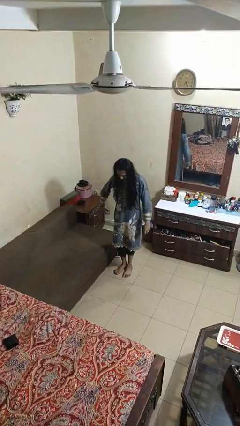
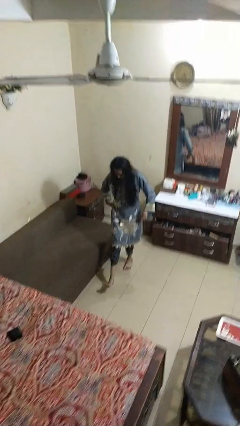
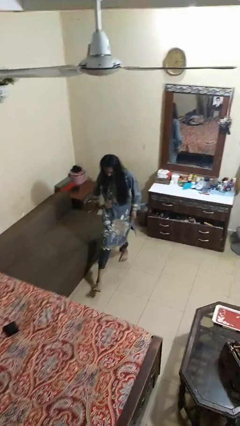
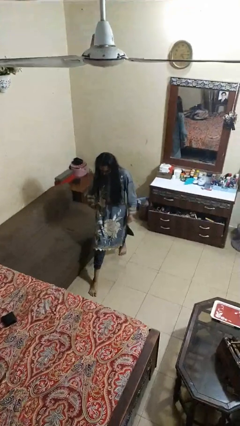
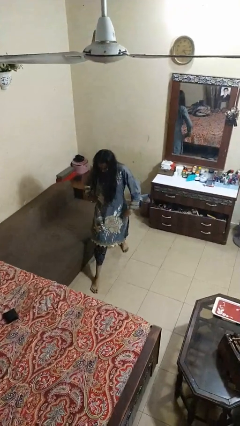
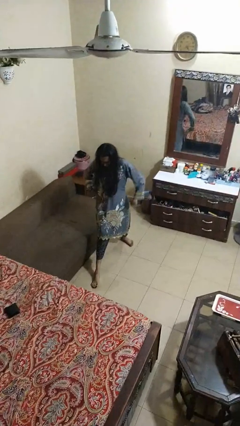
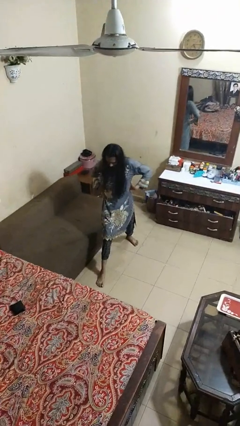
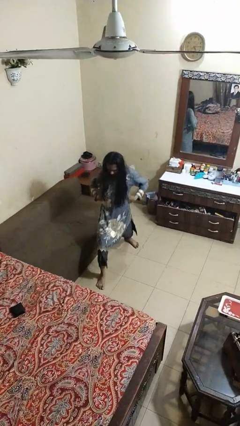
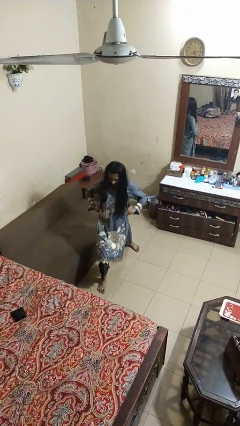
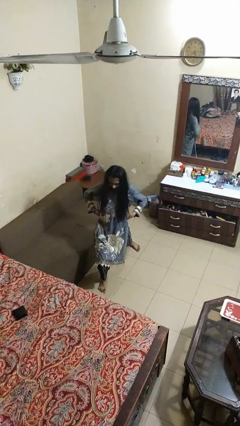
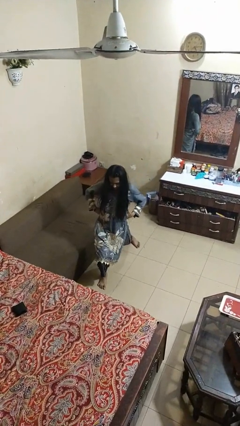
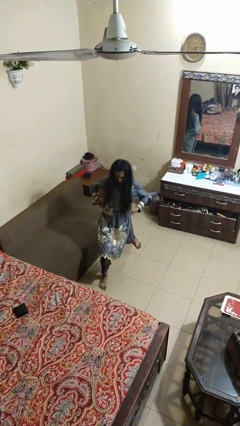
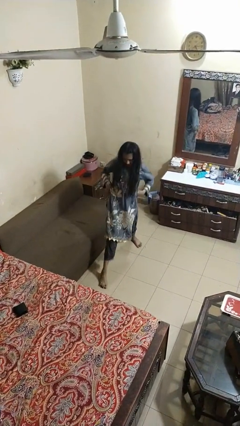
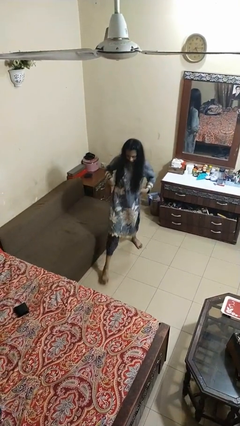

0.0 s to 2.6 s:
person exercises with lunges

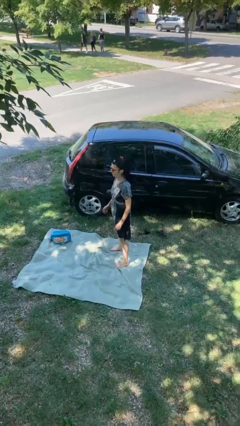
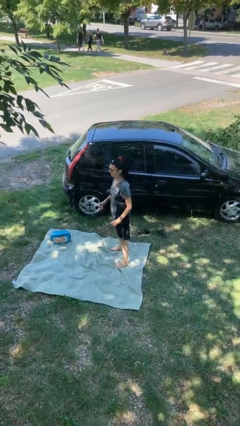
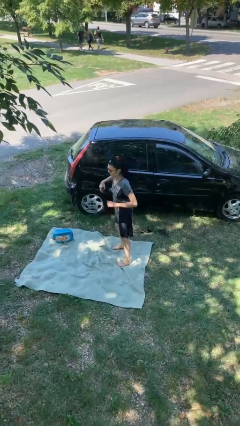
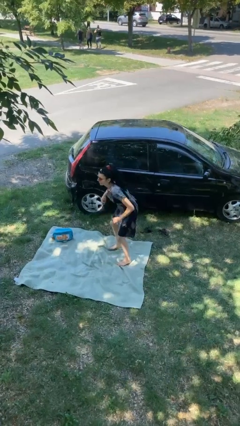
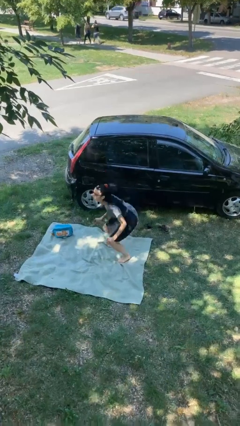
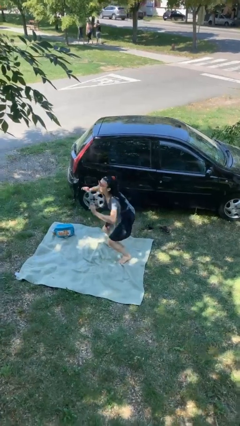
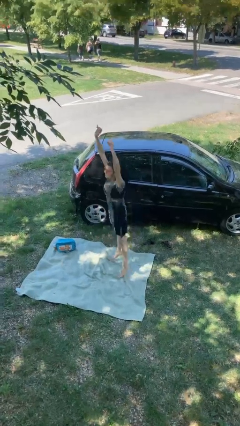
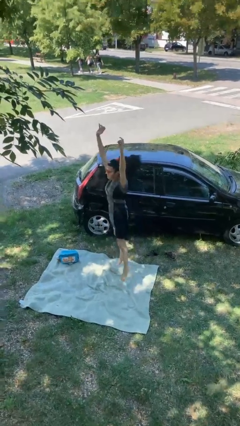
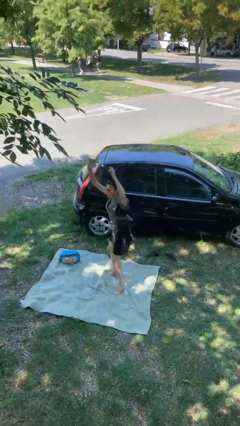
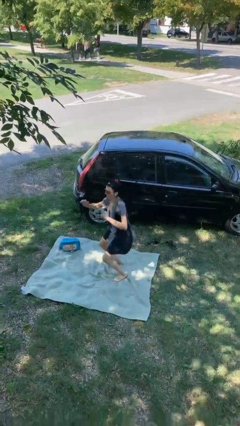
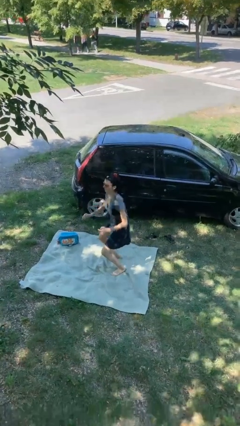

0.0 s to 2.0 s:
person jumps

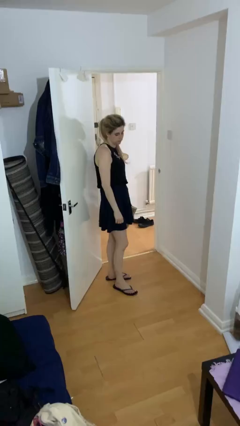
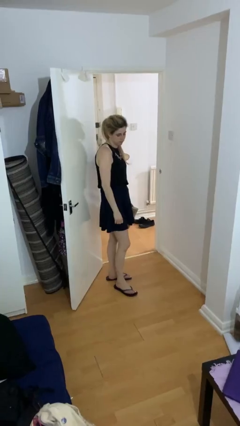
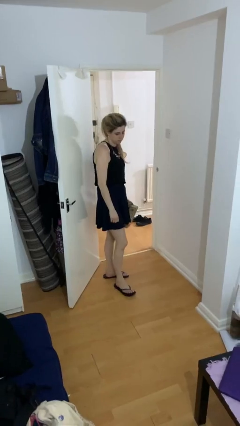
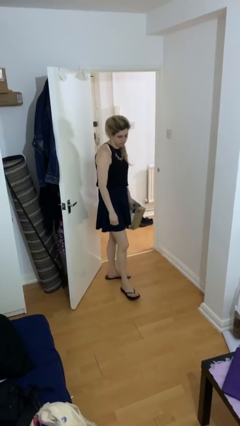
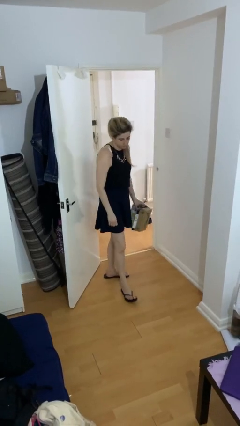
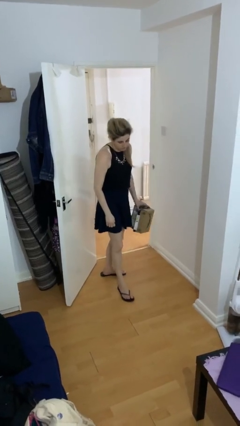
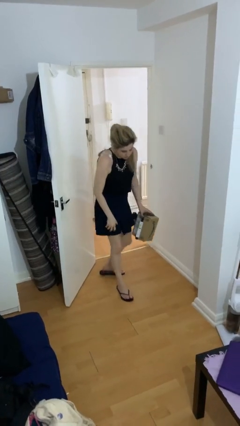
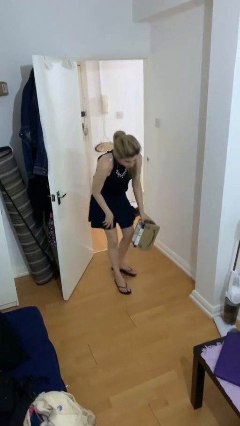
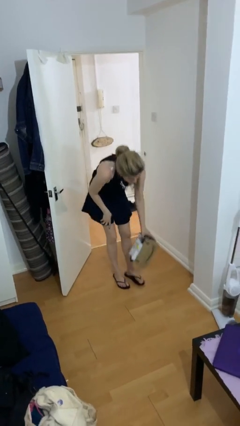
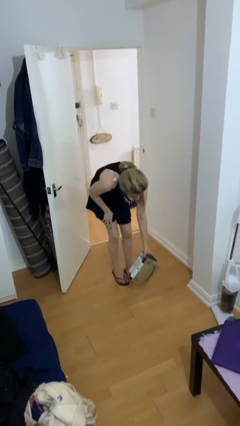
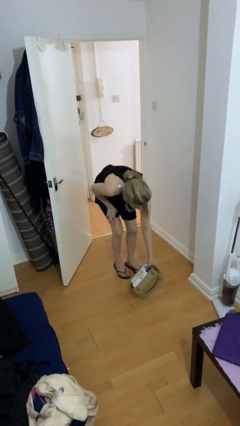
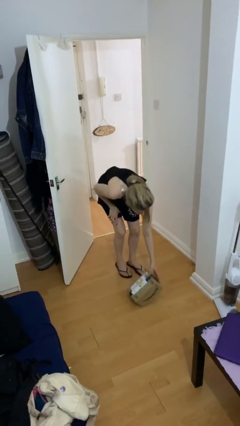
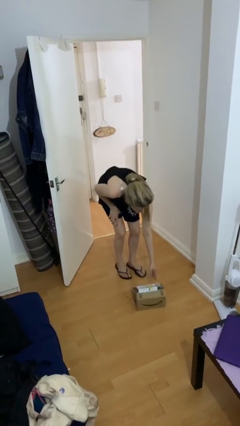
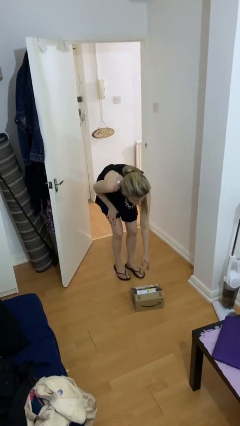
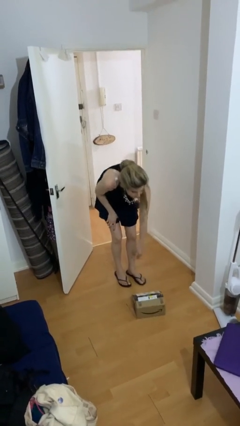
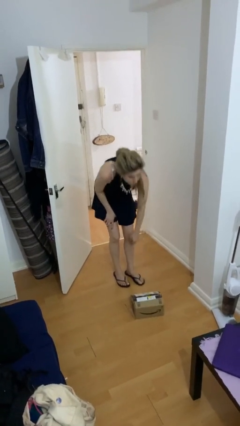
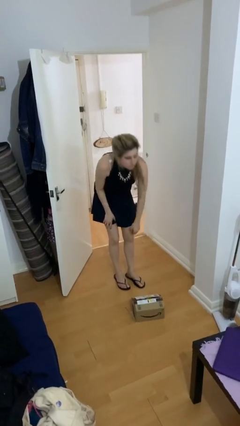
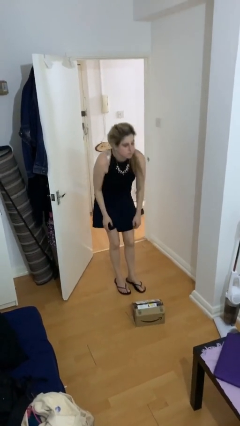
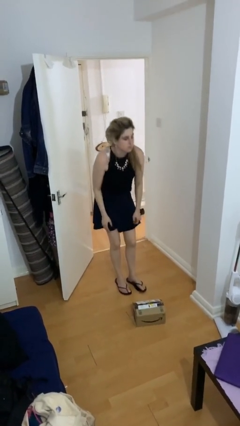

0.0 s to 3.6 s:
person puts down object on floor

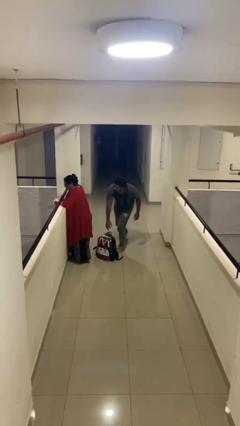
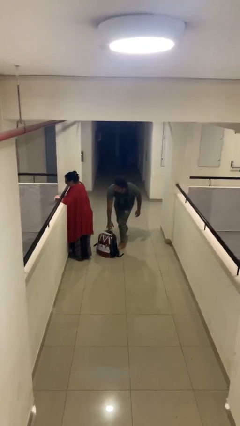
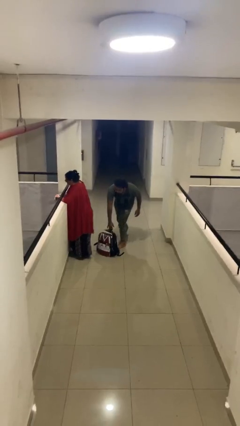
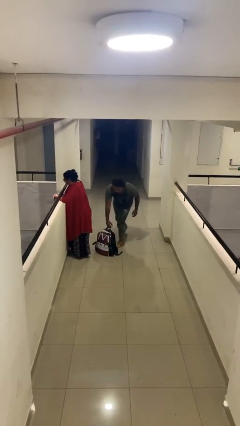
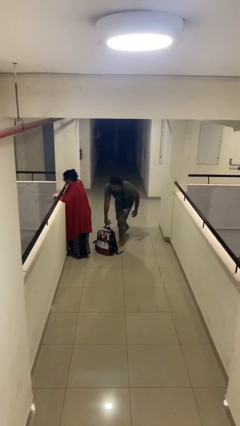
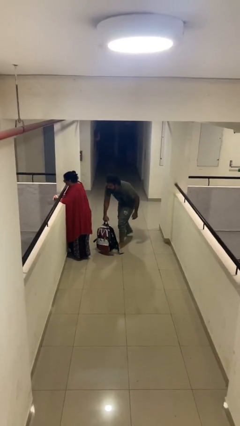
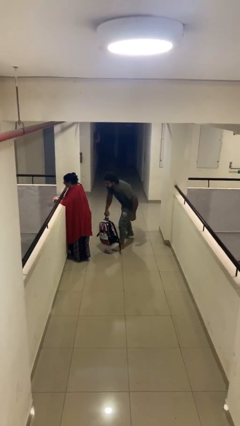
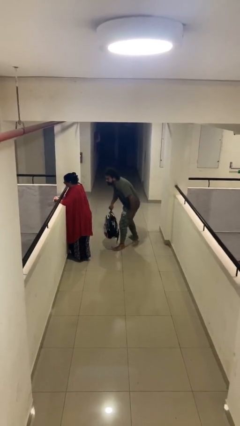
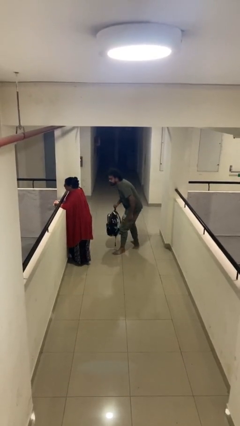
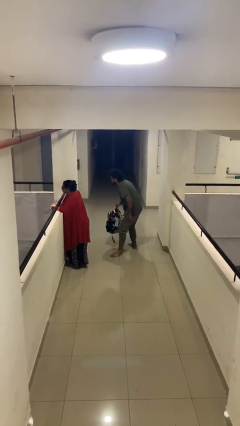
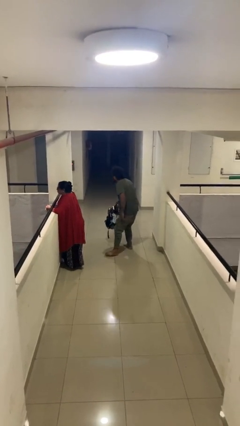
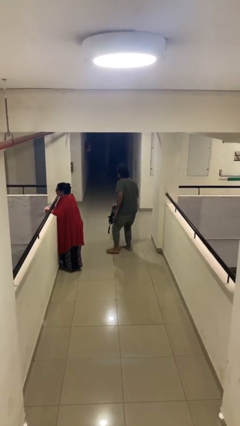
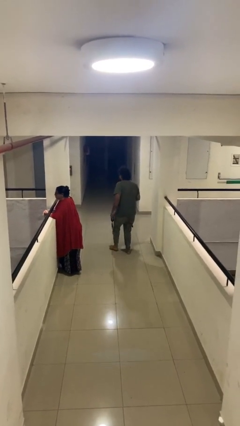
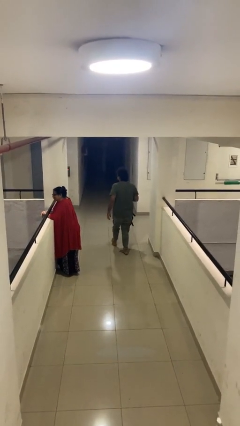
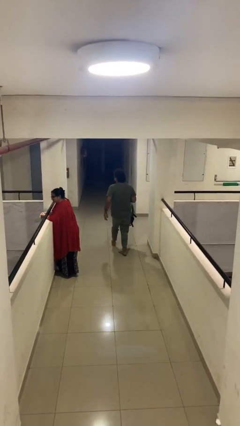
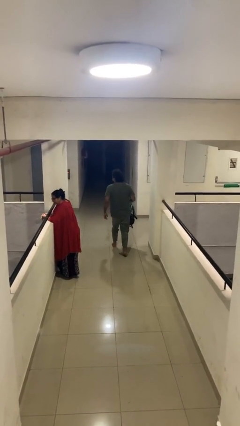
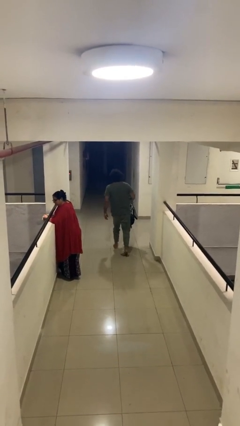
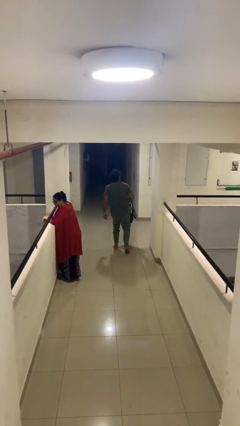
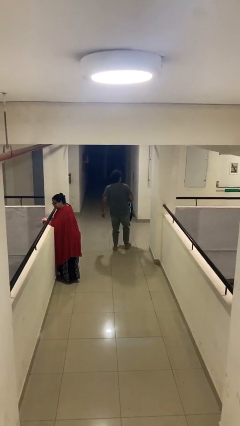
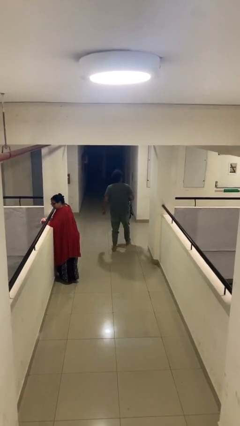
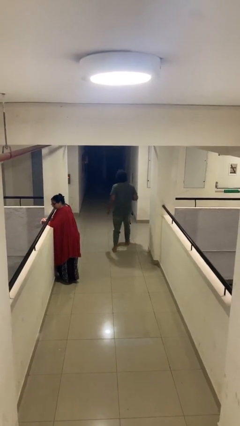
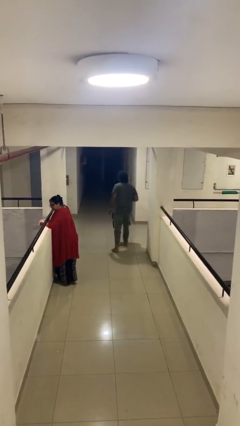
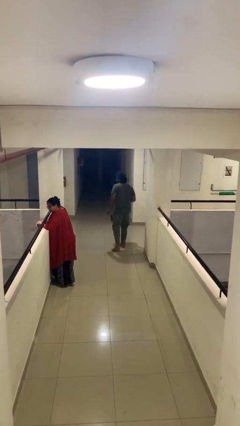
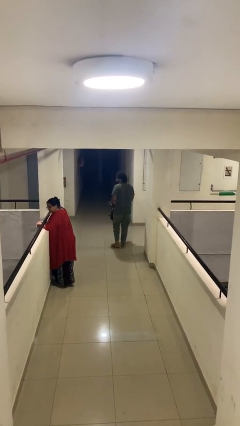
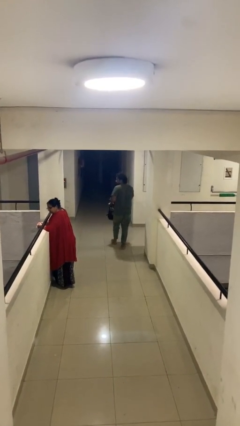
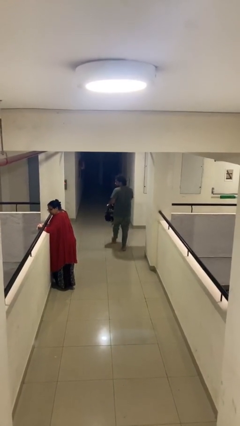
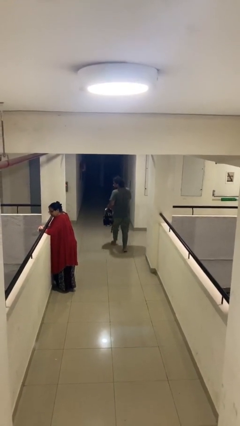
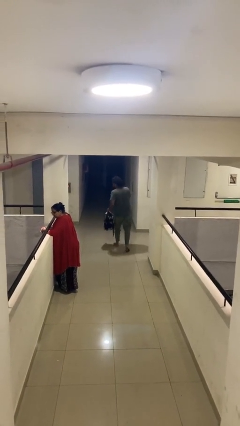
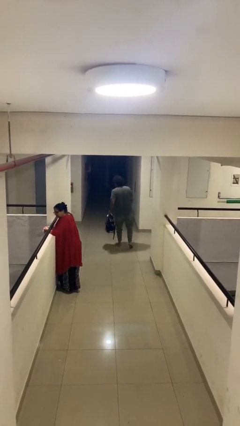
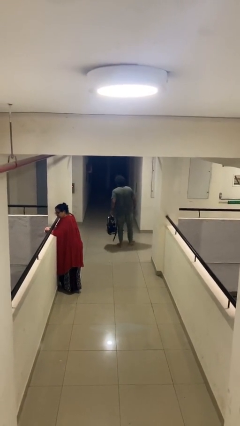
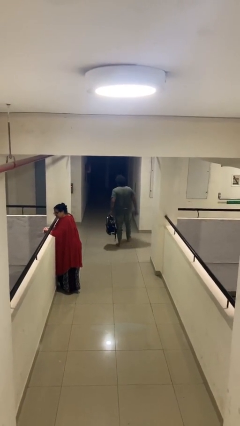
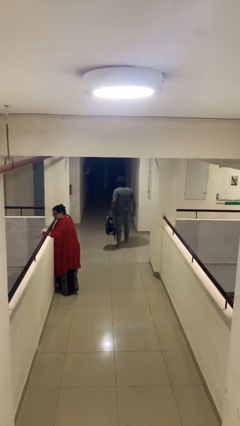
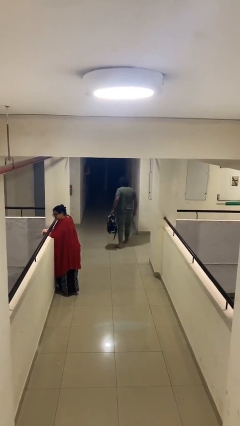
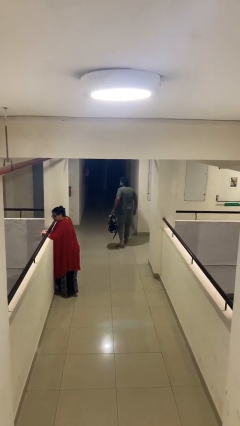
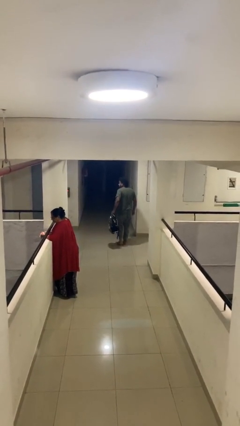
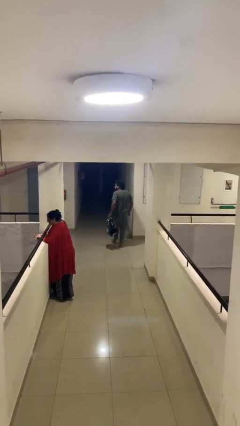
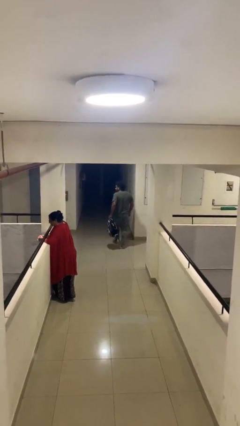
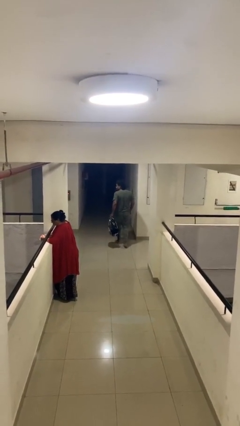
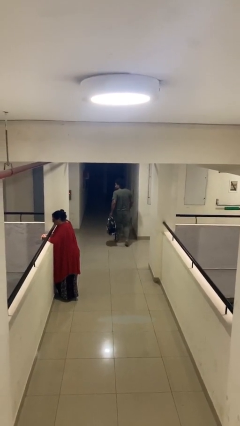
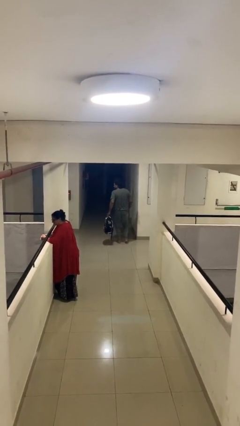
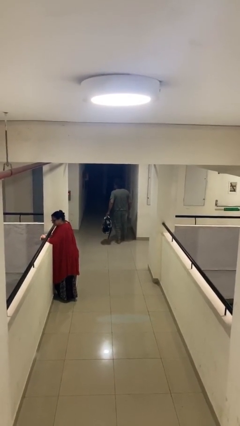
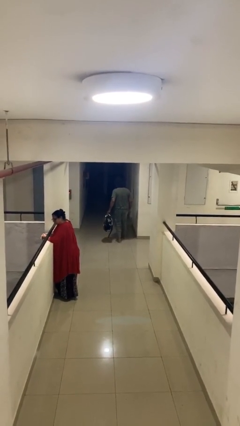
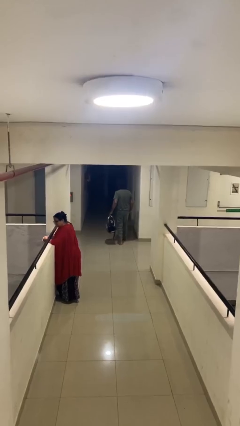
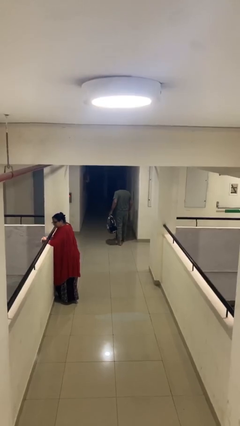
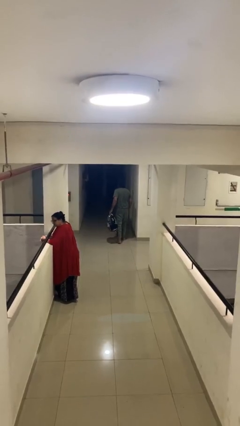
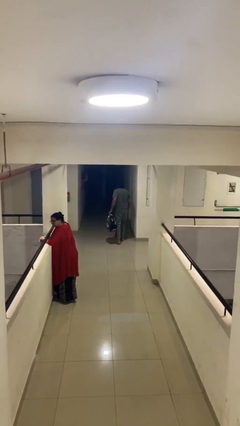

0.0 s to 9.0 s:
person steals object from person

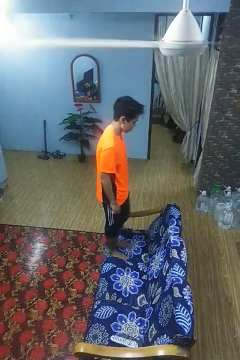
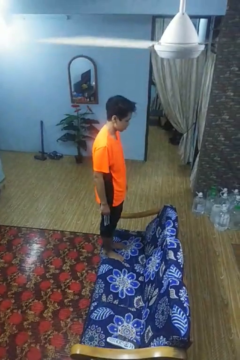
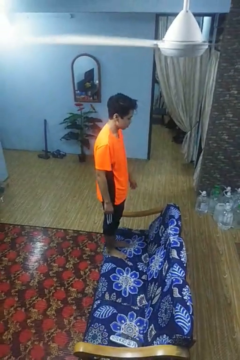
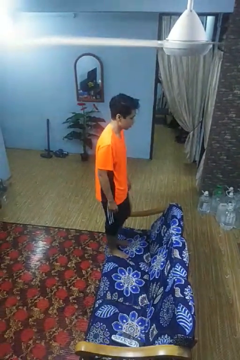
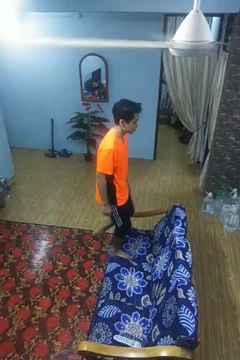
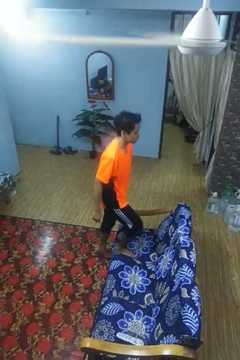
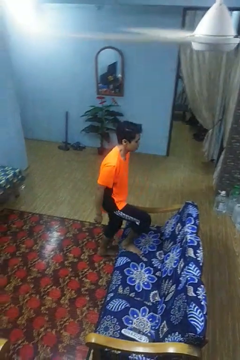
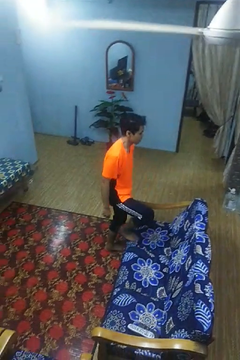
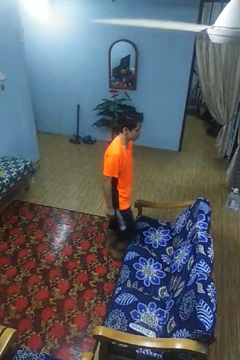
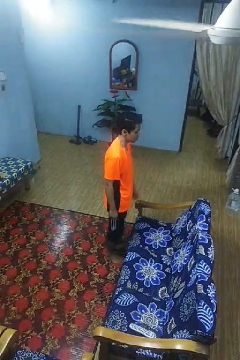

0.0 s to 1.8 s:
person climbs off couch
